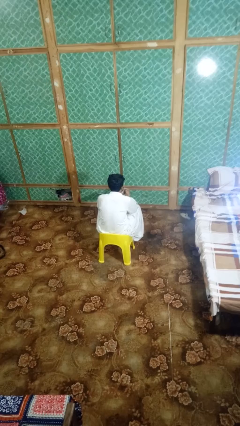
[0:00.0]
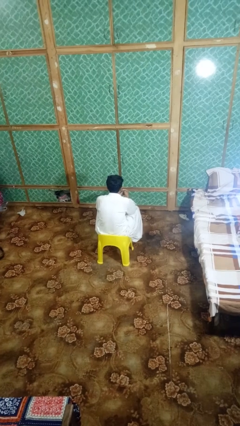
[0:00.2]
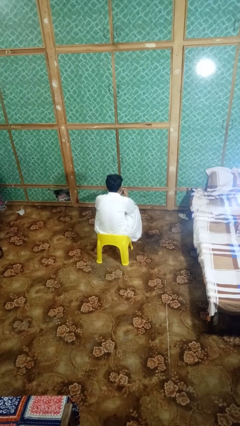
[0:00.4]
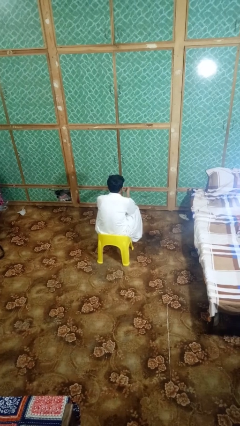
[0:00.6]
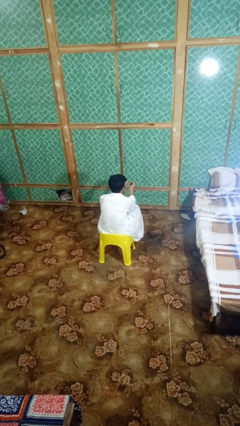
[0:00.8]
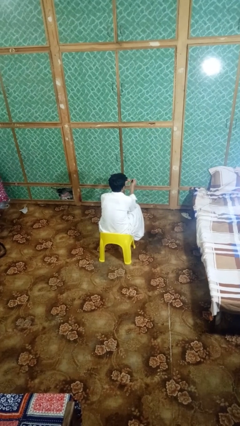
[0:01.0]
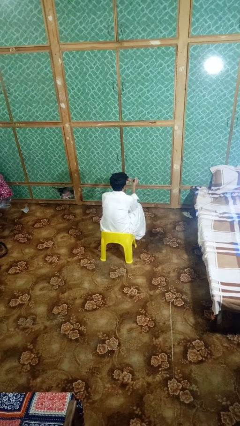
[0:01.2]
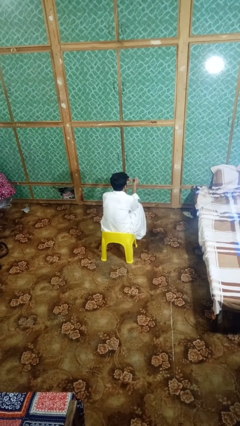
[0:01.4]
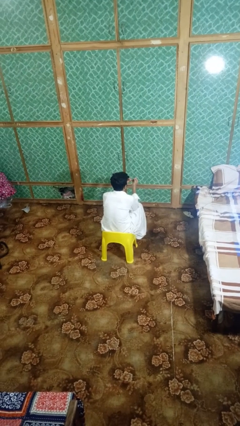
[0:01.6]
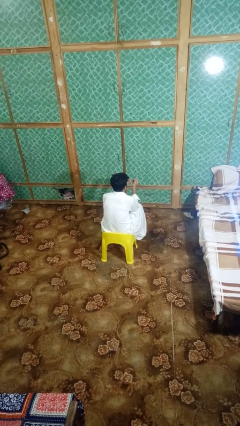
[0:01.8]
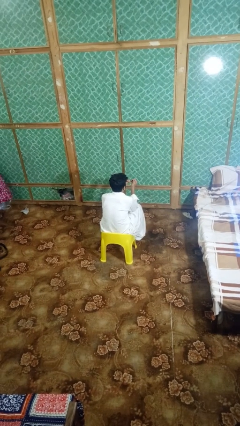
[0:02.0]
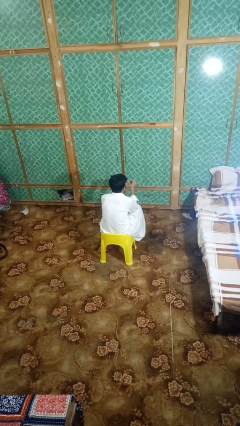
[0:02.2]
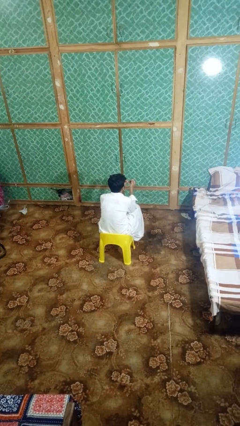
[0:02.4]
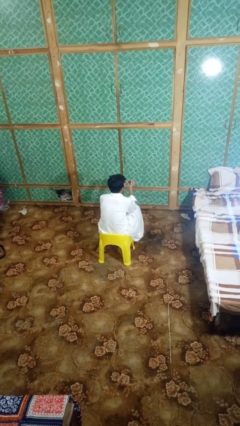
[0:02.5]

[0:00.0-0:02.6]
person files fingernails

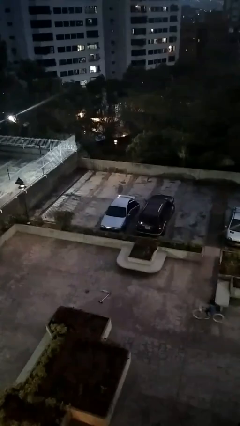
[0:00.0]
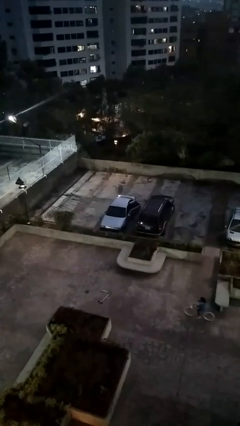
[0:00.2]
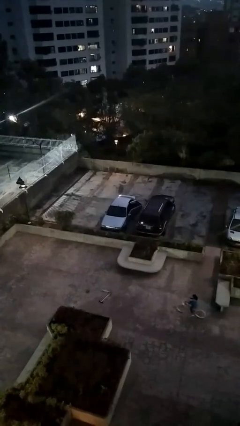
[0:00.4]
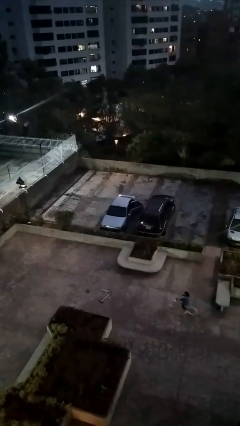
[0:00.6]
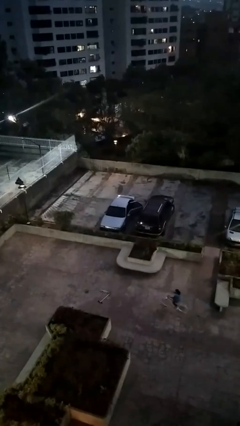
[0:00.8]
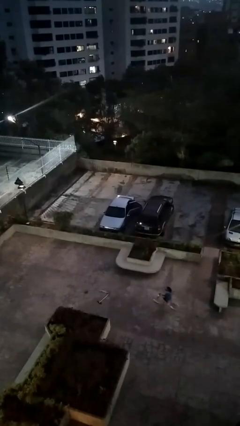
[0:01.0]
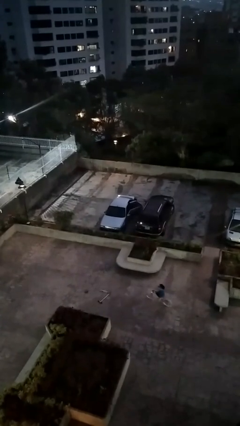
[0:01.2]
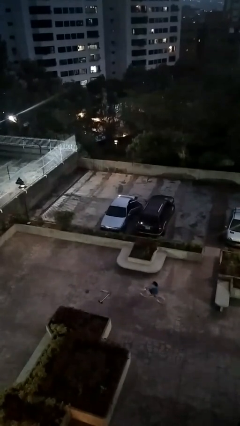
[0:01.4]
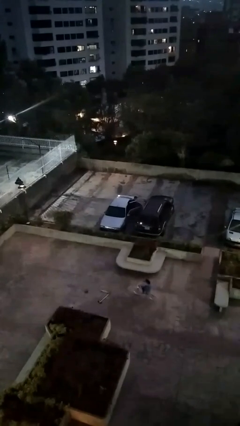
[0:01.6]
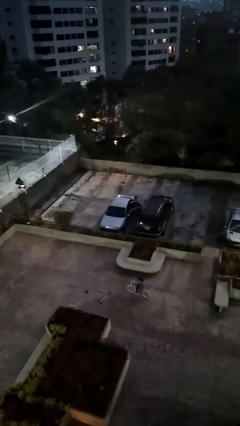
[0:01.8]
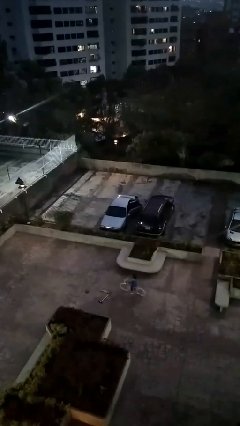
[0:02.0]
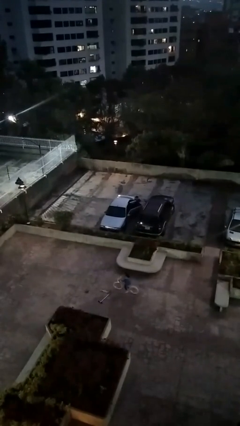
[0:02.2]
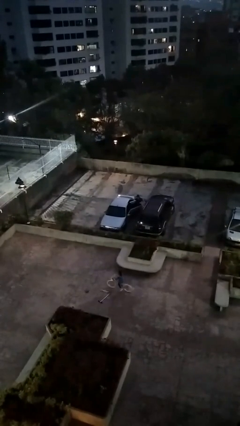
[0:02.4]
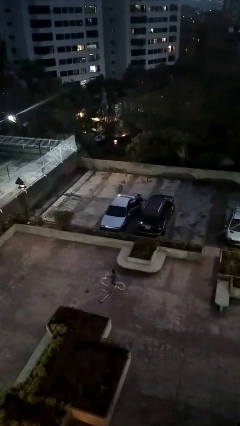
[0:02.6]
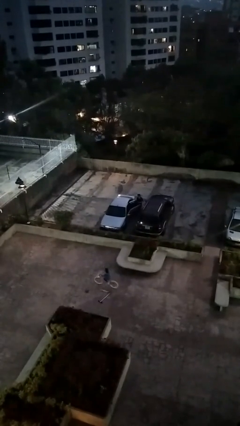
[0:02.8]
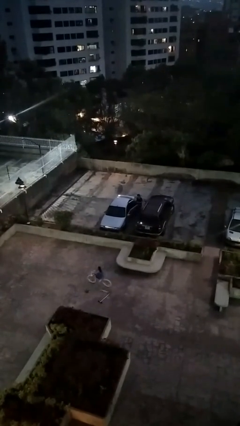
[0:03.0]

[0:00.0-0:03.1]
car drops off person

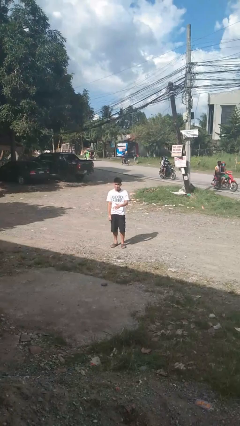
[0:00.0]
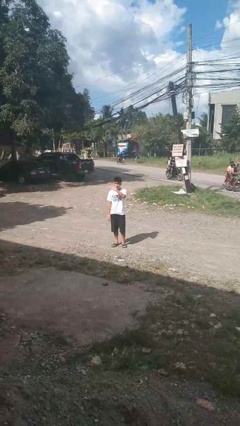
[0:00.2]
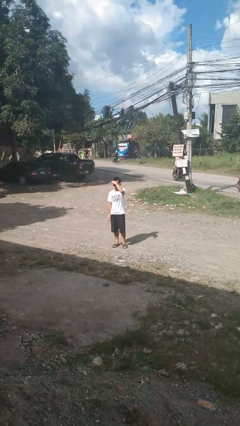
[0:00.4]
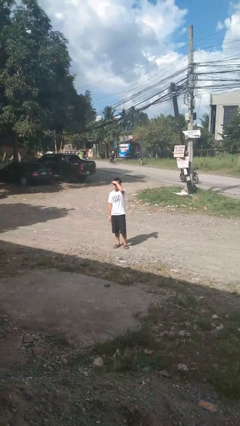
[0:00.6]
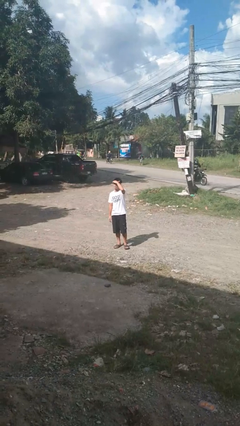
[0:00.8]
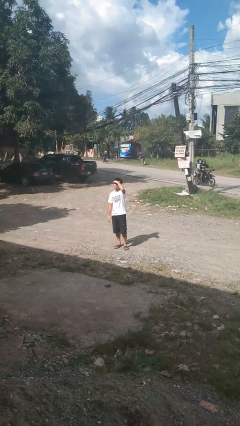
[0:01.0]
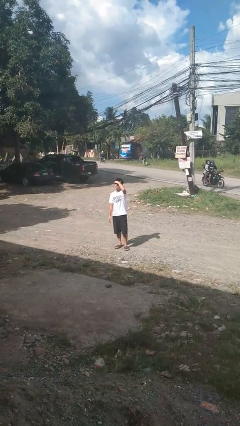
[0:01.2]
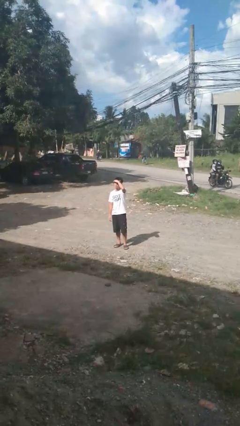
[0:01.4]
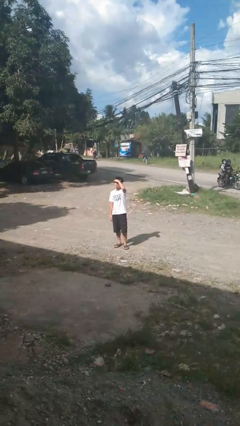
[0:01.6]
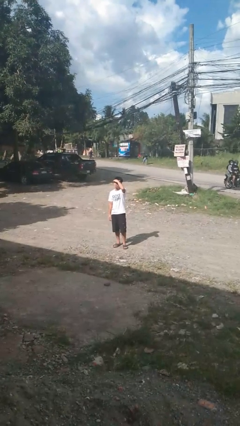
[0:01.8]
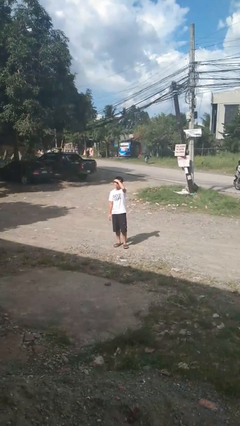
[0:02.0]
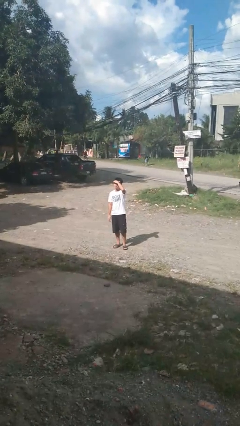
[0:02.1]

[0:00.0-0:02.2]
person shades eyes

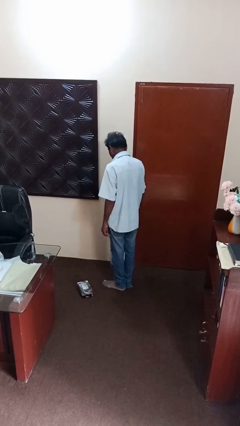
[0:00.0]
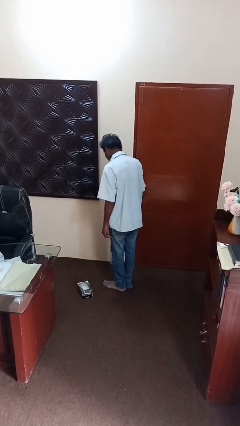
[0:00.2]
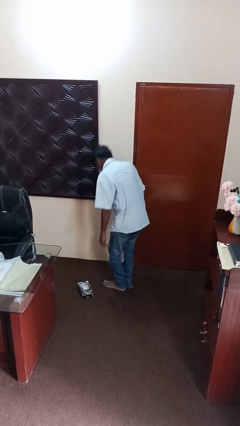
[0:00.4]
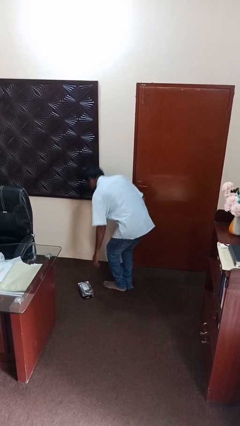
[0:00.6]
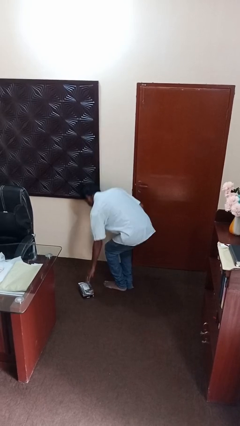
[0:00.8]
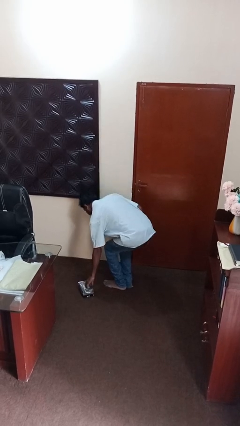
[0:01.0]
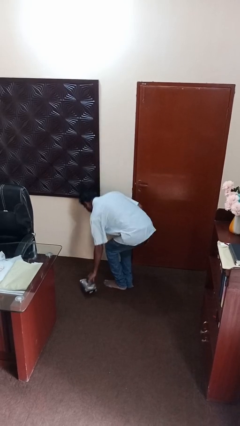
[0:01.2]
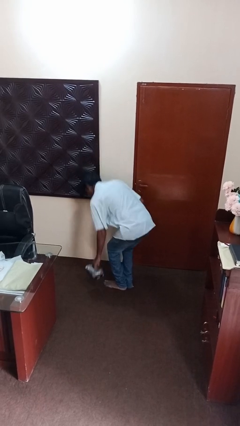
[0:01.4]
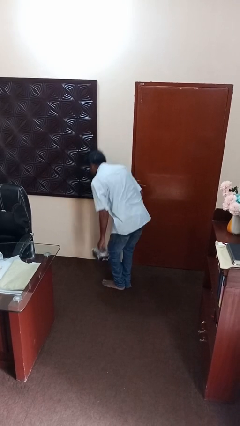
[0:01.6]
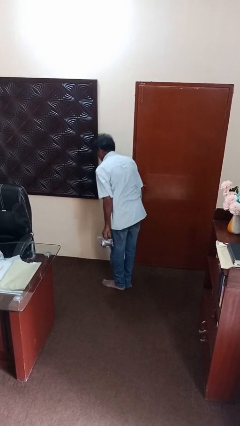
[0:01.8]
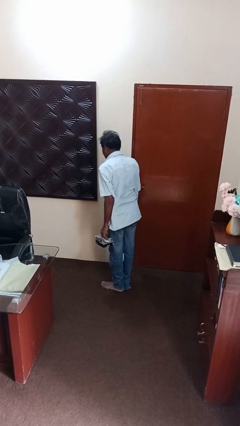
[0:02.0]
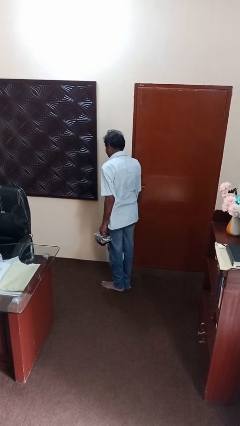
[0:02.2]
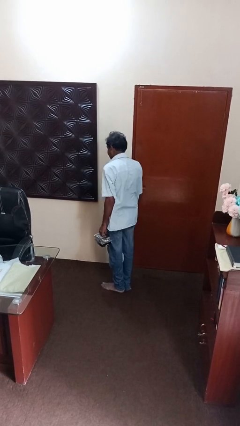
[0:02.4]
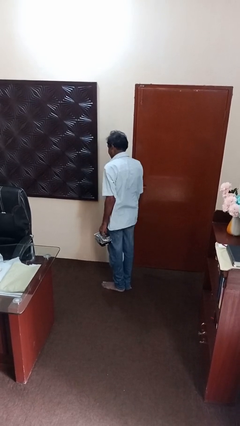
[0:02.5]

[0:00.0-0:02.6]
person picks up object from floor

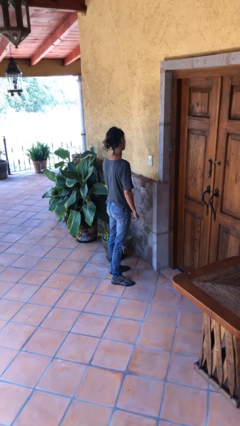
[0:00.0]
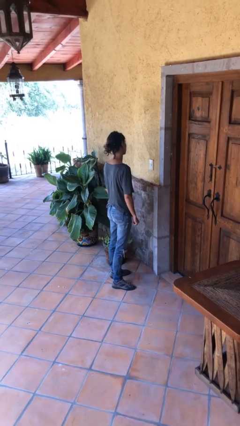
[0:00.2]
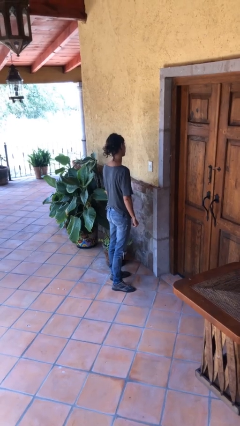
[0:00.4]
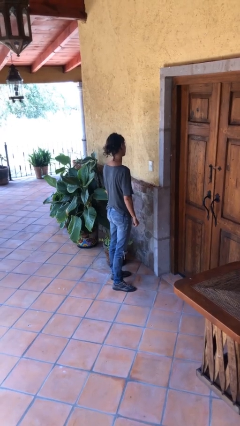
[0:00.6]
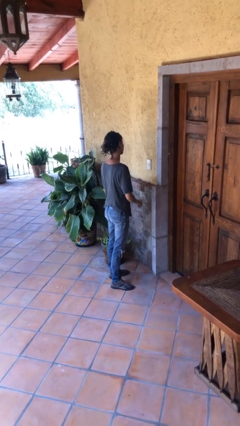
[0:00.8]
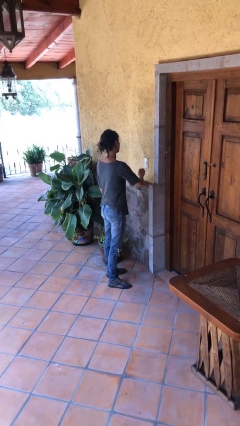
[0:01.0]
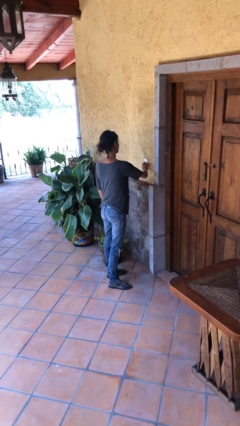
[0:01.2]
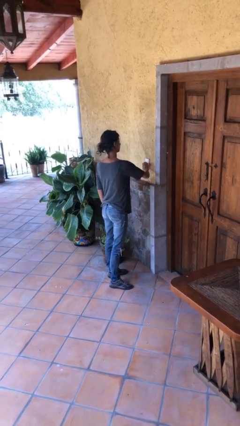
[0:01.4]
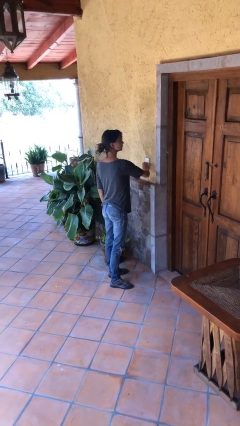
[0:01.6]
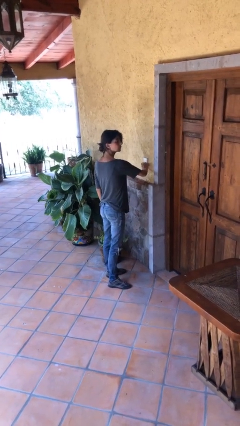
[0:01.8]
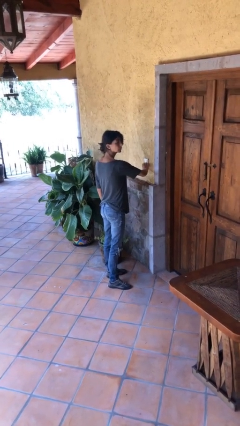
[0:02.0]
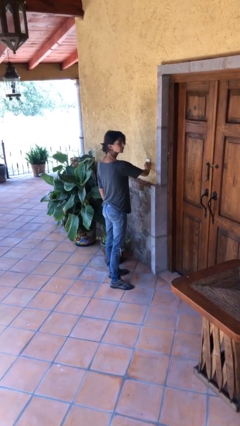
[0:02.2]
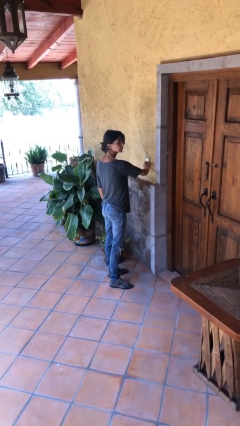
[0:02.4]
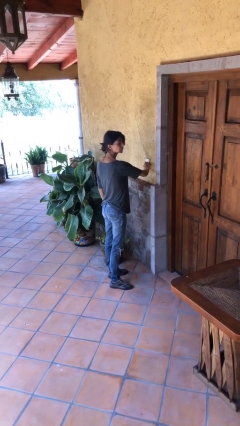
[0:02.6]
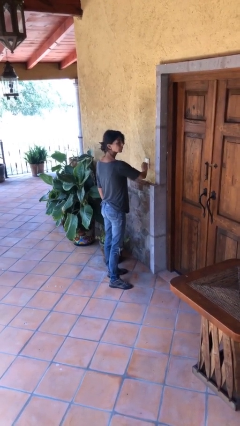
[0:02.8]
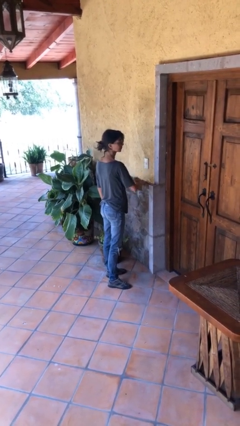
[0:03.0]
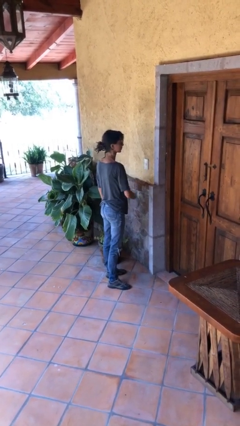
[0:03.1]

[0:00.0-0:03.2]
person adjusts thermostat

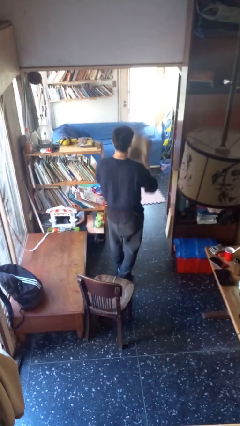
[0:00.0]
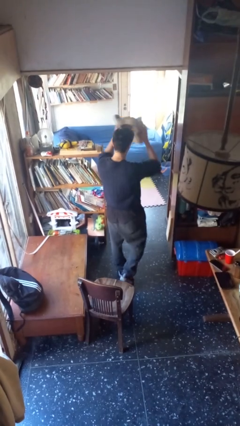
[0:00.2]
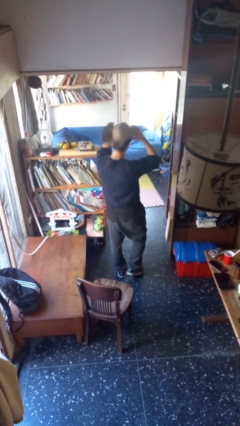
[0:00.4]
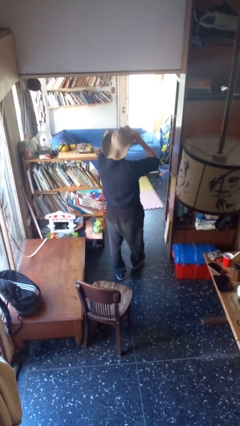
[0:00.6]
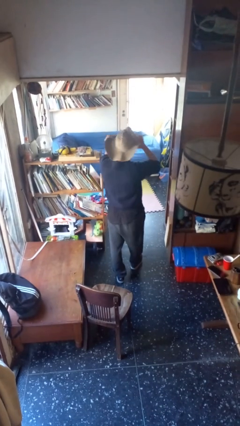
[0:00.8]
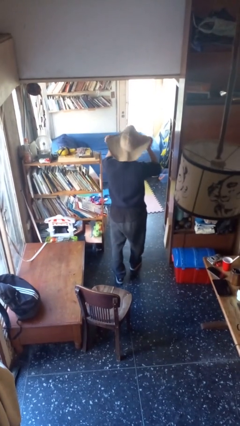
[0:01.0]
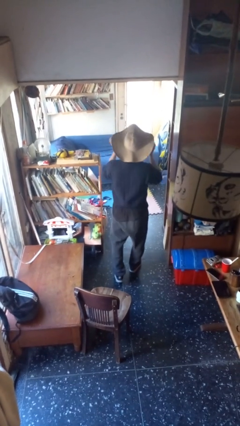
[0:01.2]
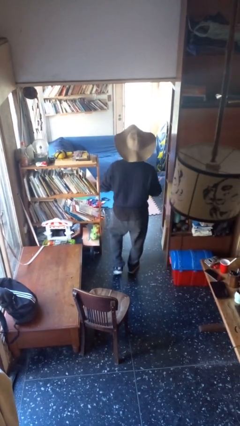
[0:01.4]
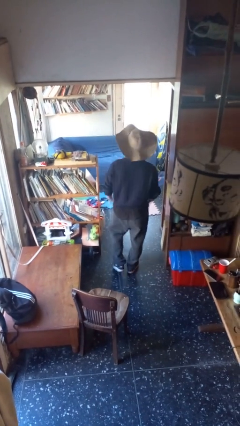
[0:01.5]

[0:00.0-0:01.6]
person puts on hat

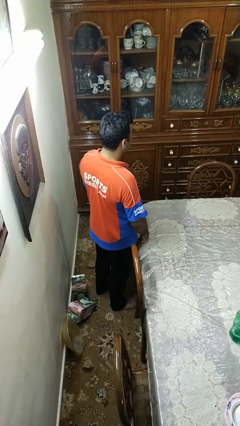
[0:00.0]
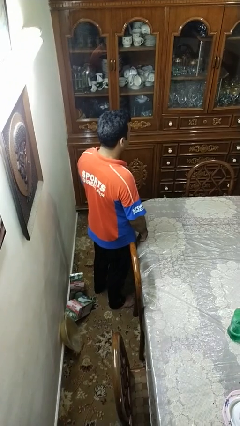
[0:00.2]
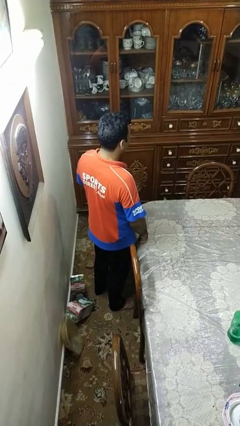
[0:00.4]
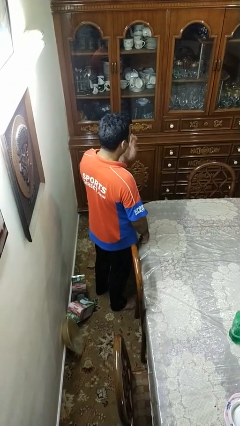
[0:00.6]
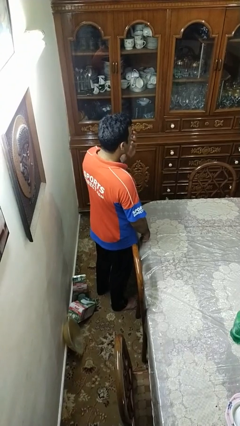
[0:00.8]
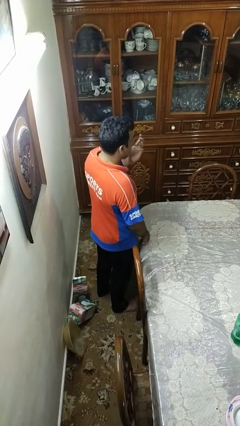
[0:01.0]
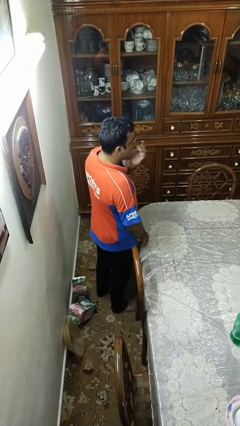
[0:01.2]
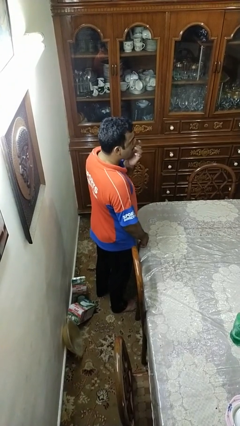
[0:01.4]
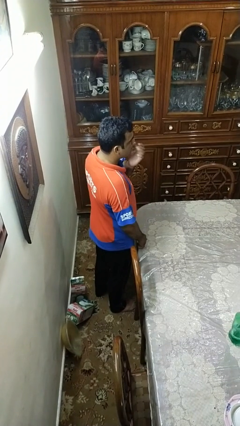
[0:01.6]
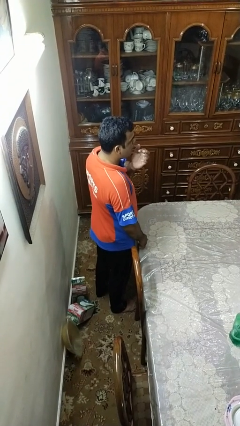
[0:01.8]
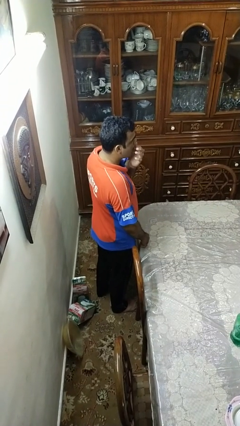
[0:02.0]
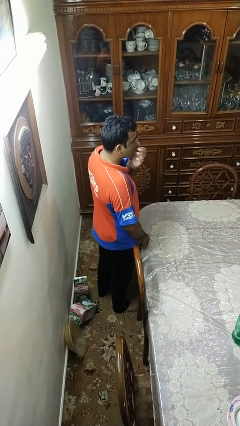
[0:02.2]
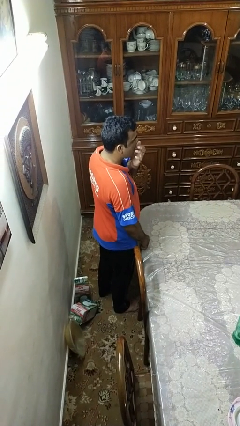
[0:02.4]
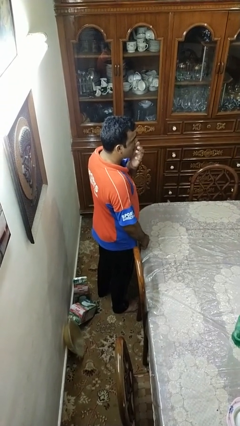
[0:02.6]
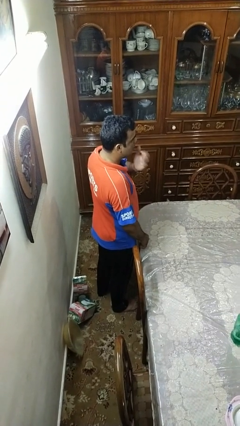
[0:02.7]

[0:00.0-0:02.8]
person licks fingers
